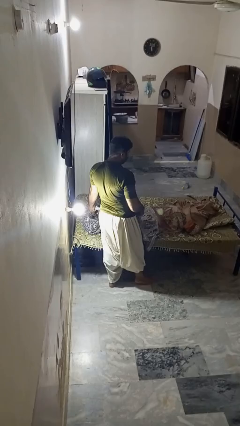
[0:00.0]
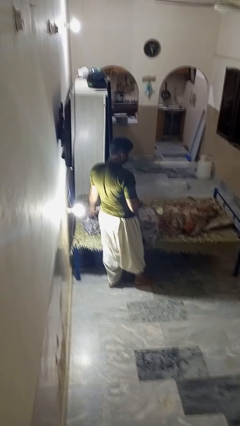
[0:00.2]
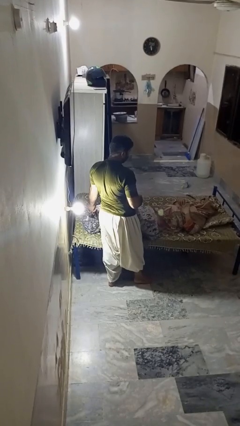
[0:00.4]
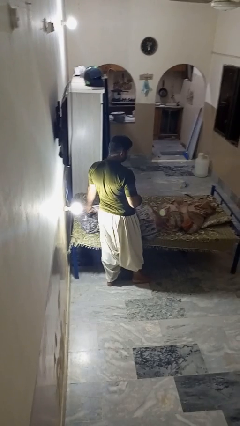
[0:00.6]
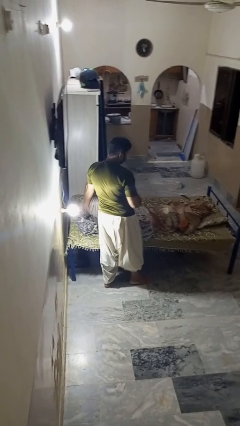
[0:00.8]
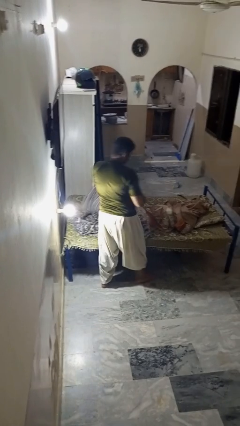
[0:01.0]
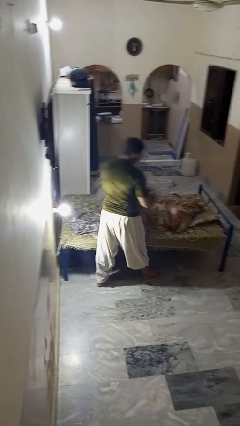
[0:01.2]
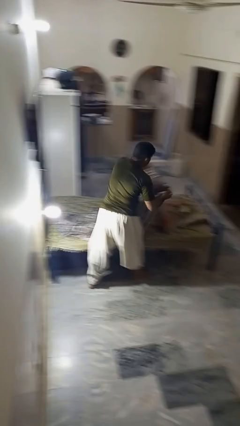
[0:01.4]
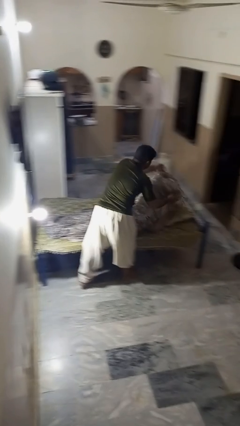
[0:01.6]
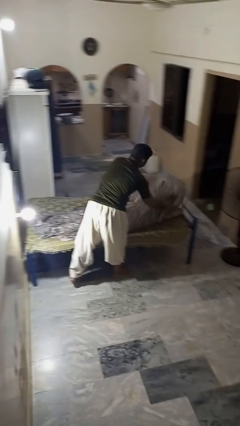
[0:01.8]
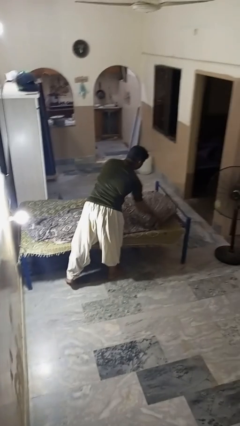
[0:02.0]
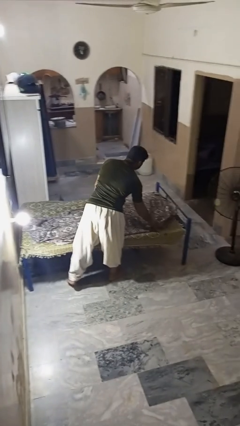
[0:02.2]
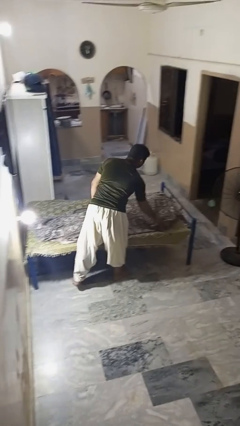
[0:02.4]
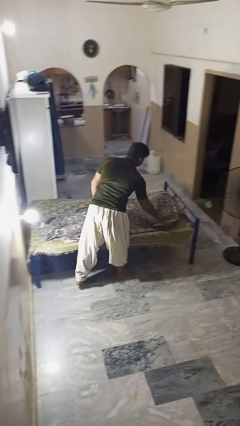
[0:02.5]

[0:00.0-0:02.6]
person covers friend with blanket

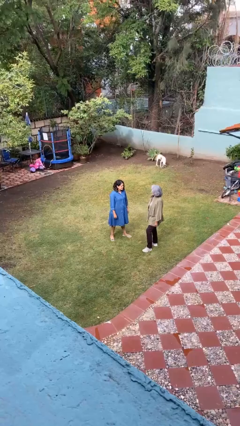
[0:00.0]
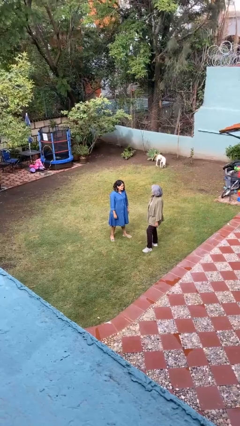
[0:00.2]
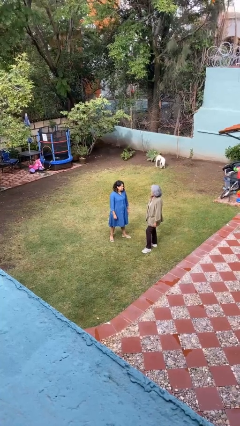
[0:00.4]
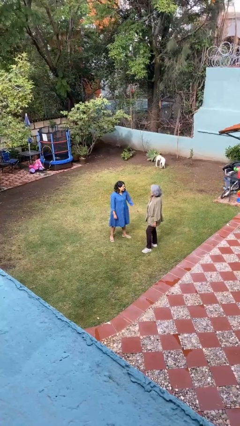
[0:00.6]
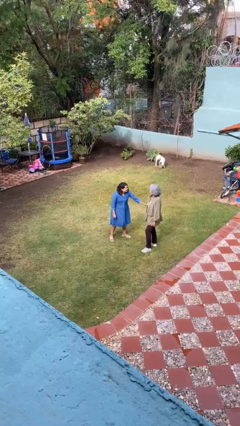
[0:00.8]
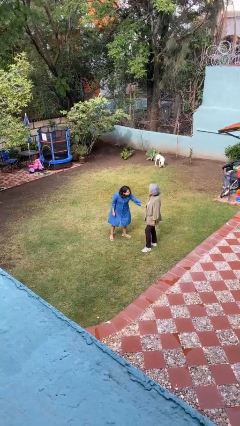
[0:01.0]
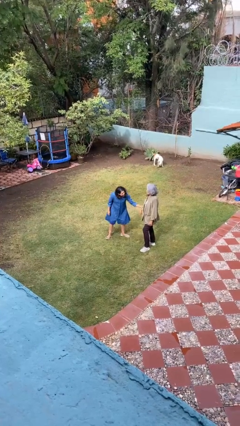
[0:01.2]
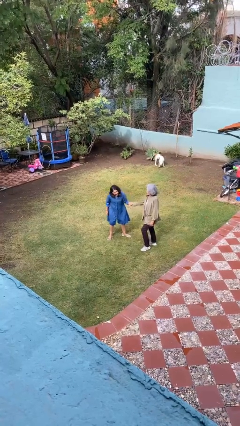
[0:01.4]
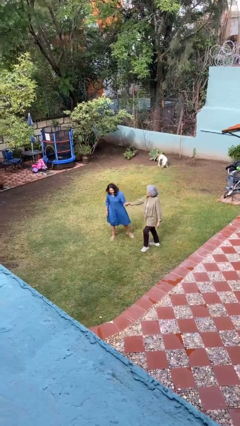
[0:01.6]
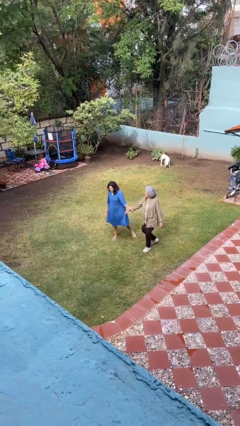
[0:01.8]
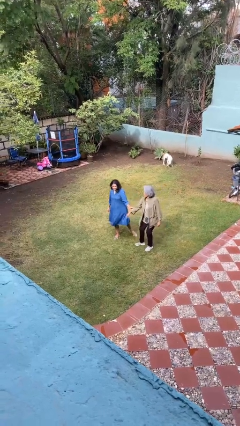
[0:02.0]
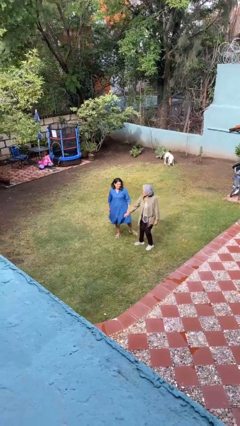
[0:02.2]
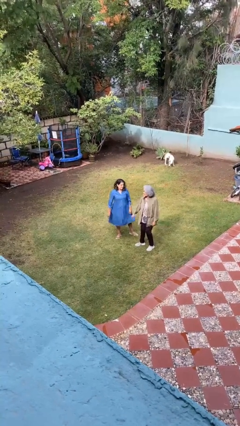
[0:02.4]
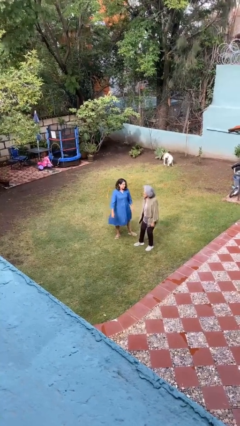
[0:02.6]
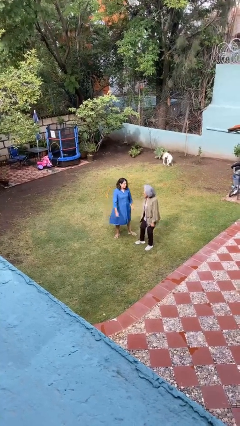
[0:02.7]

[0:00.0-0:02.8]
person grabs person by forearm

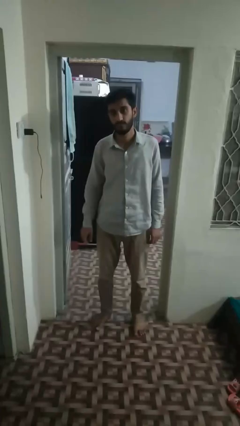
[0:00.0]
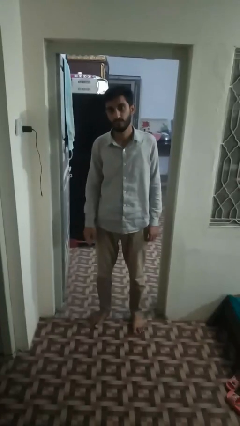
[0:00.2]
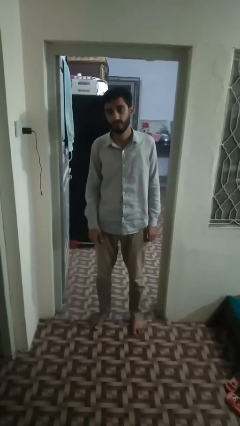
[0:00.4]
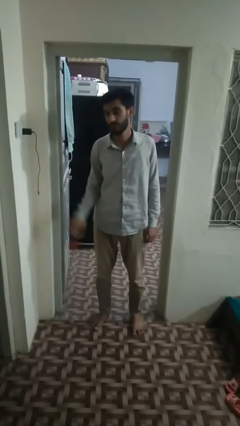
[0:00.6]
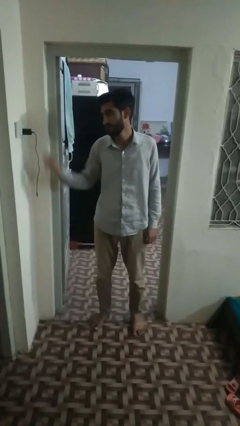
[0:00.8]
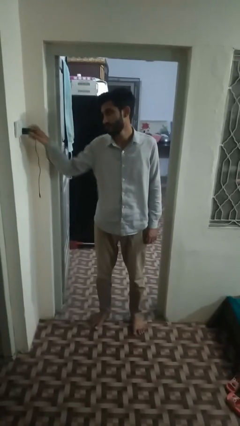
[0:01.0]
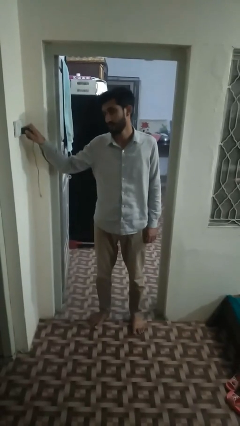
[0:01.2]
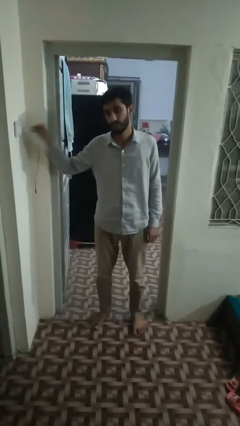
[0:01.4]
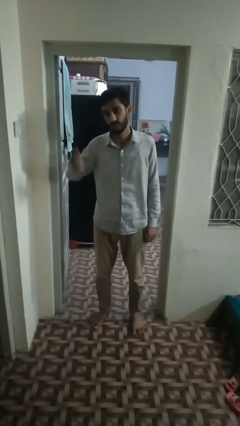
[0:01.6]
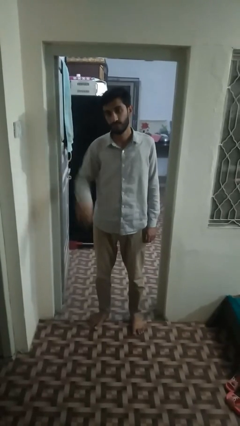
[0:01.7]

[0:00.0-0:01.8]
person unplugs from electrical socket

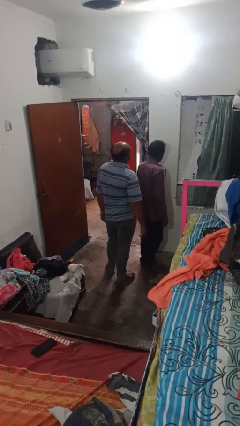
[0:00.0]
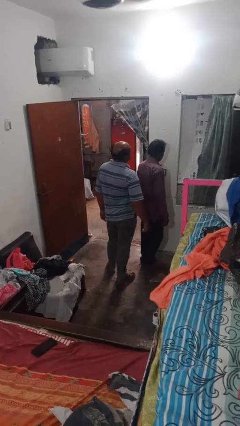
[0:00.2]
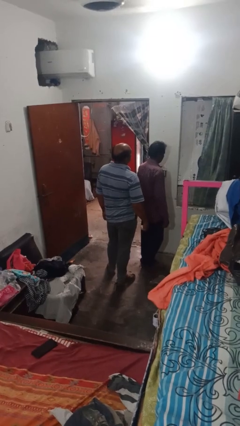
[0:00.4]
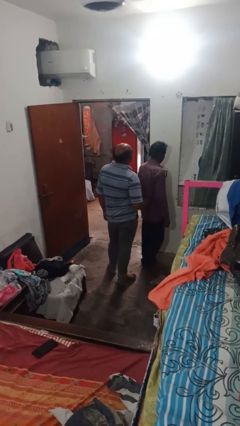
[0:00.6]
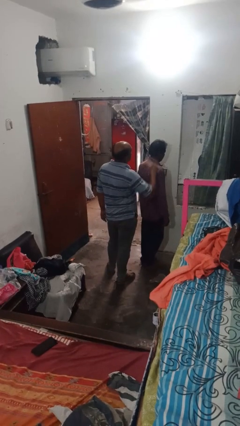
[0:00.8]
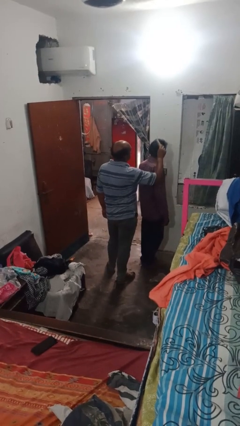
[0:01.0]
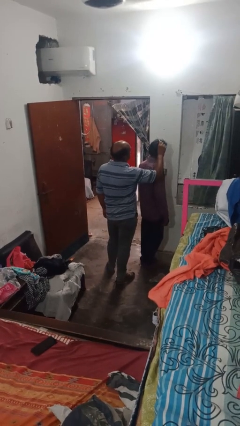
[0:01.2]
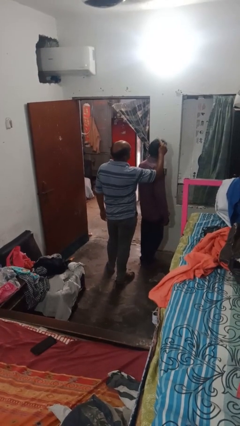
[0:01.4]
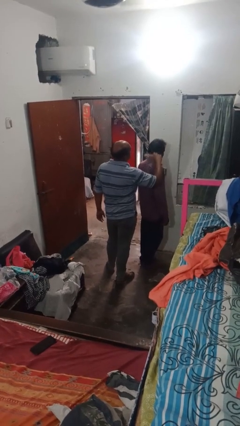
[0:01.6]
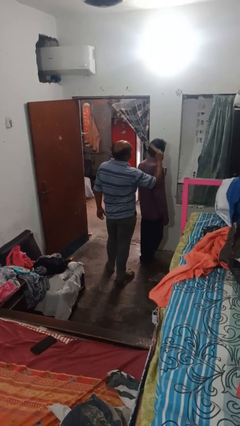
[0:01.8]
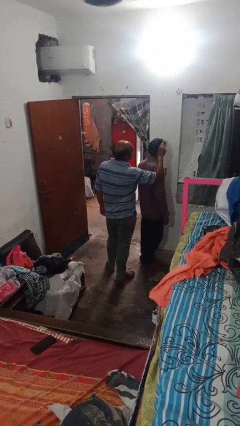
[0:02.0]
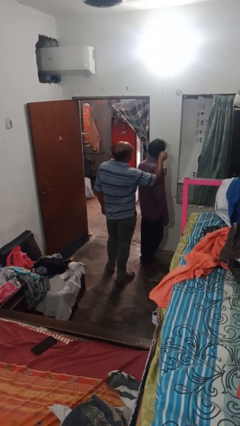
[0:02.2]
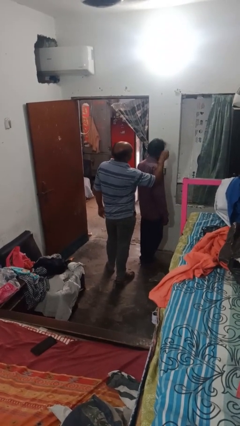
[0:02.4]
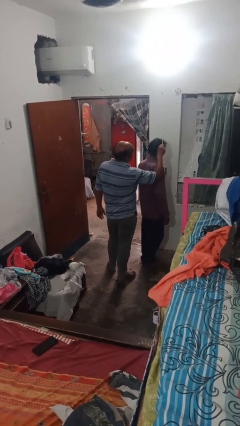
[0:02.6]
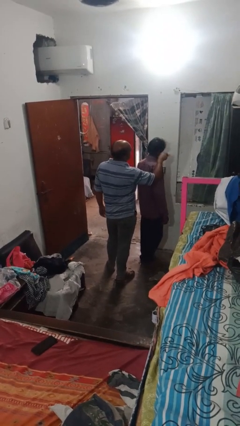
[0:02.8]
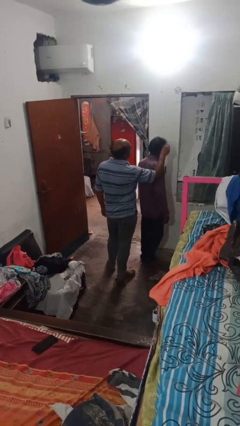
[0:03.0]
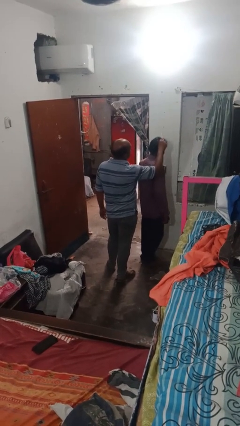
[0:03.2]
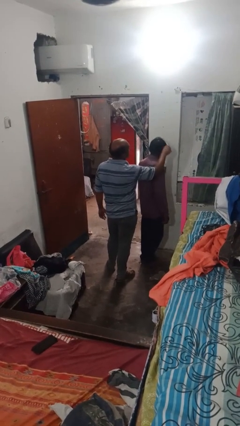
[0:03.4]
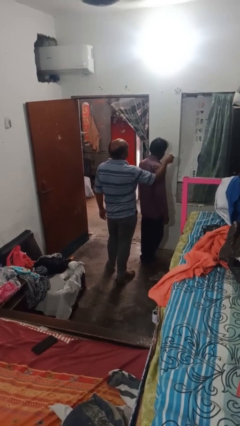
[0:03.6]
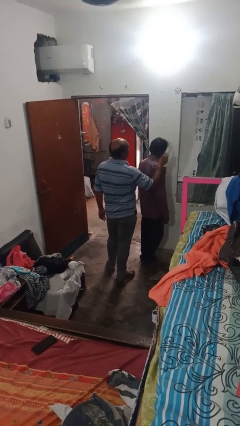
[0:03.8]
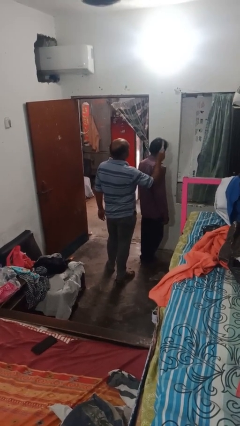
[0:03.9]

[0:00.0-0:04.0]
person brushes hair of person

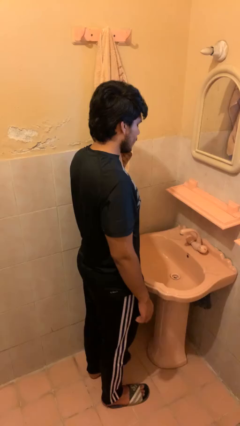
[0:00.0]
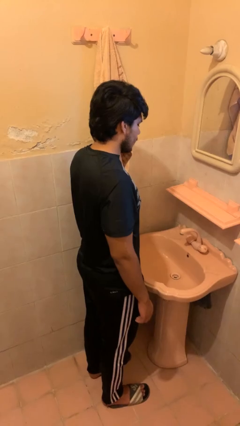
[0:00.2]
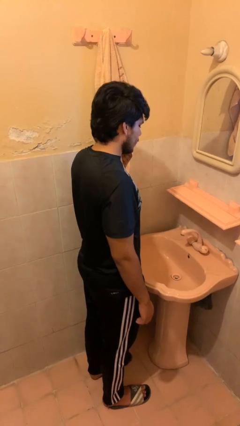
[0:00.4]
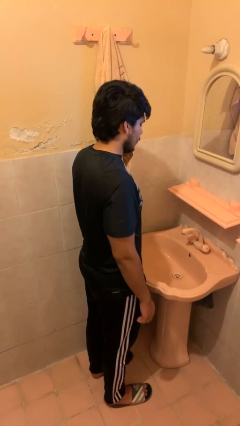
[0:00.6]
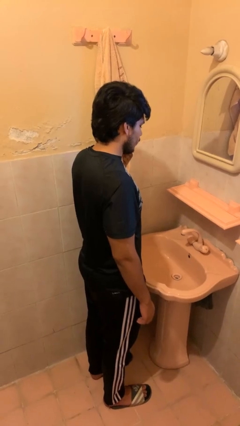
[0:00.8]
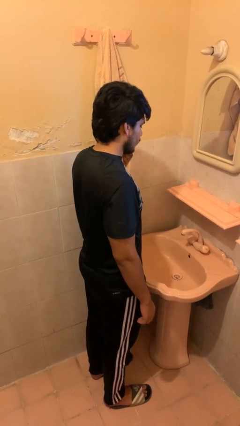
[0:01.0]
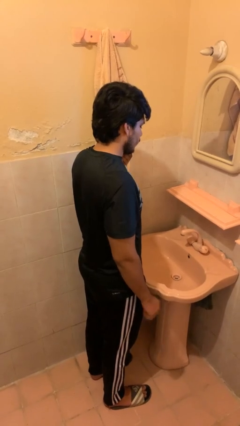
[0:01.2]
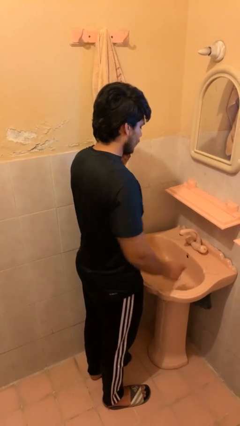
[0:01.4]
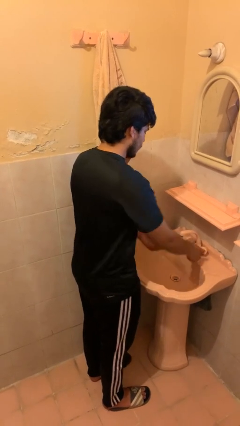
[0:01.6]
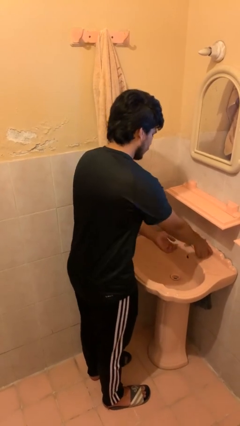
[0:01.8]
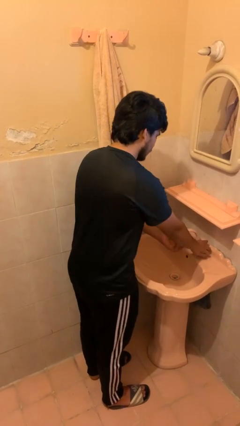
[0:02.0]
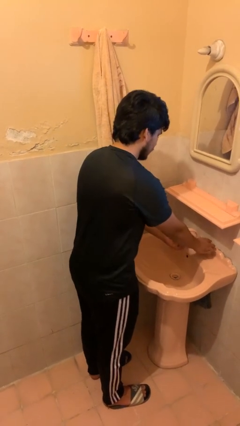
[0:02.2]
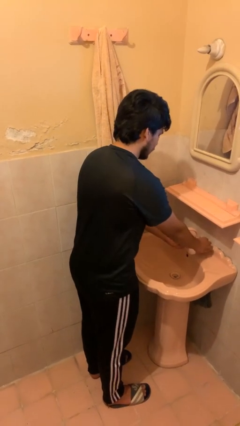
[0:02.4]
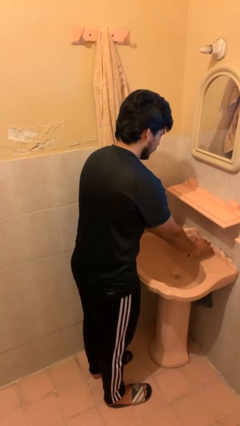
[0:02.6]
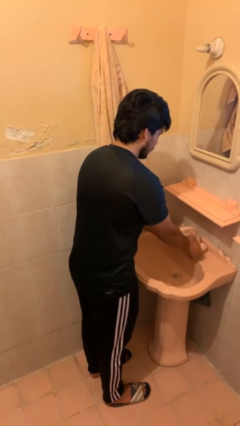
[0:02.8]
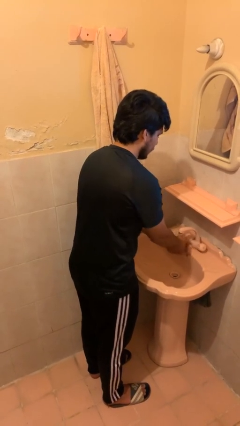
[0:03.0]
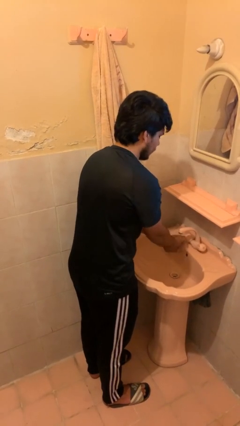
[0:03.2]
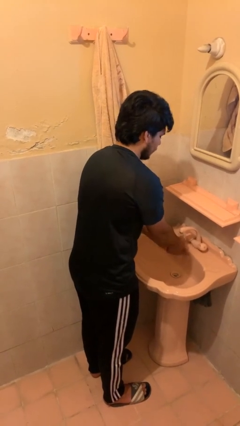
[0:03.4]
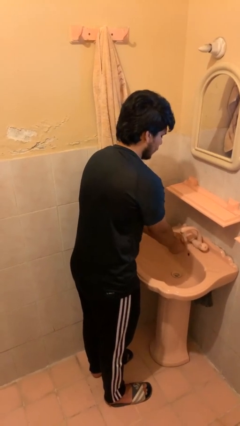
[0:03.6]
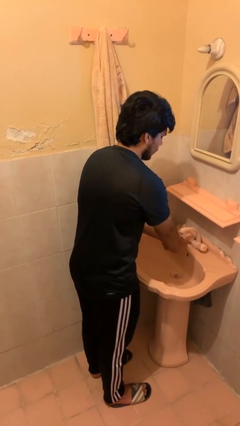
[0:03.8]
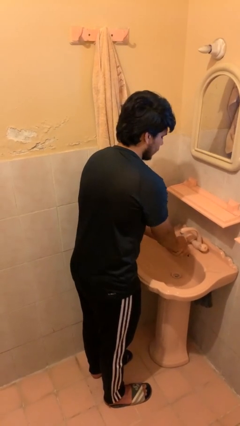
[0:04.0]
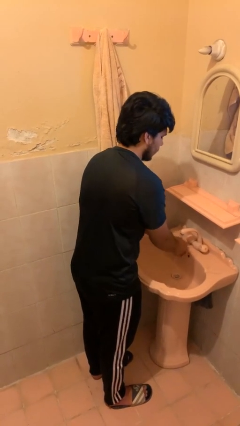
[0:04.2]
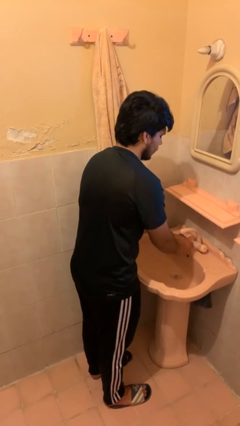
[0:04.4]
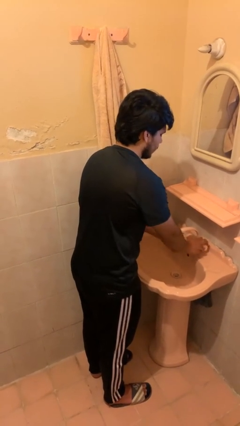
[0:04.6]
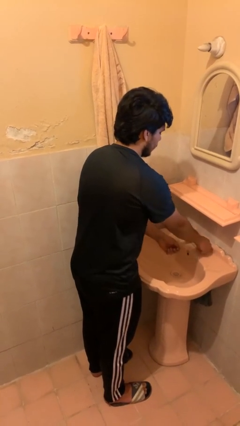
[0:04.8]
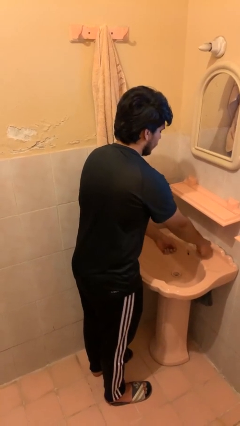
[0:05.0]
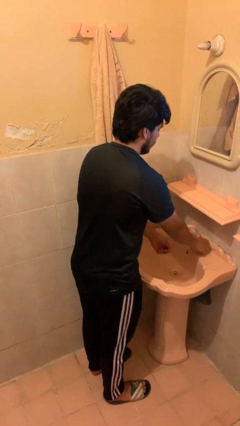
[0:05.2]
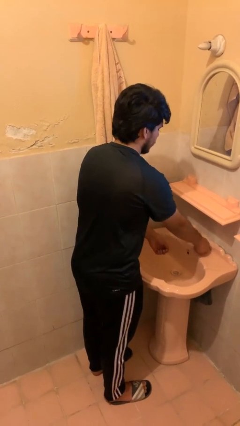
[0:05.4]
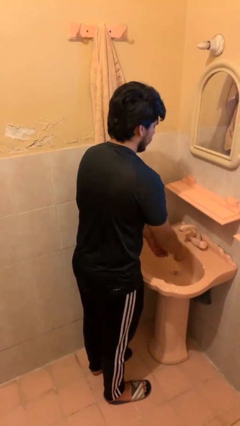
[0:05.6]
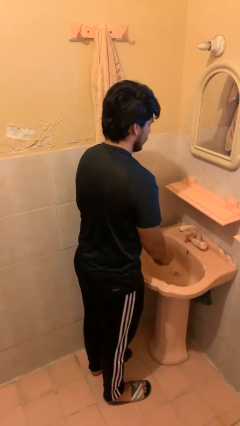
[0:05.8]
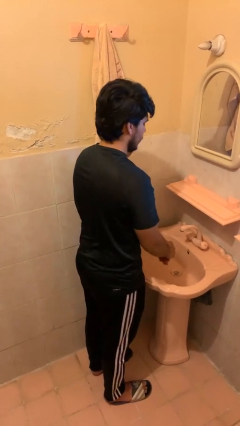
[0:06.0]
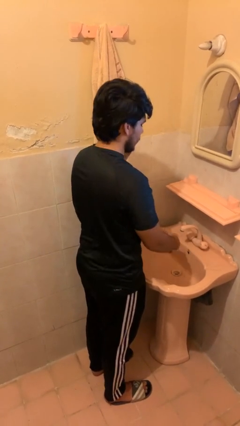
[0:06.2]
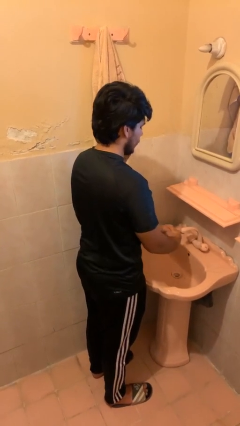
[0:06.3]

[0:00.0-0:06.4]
person washes hands
